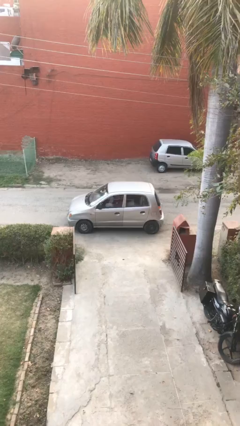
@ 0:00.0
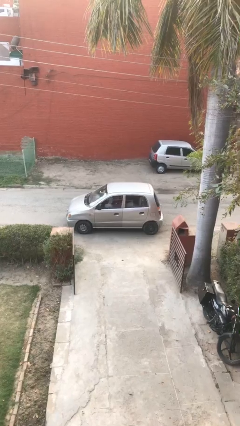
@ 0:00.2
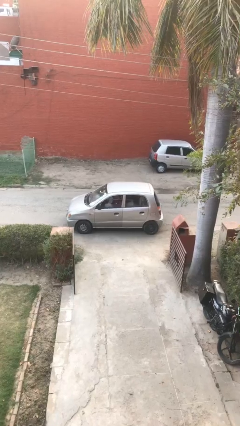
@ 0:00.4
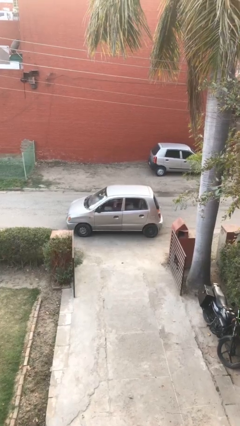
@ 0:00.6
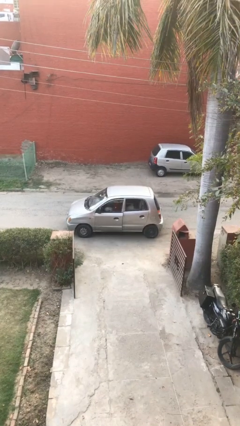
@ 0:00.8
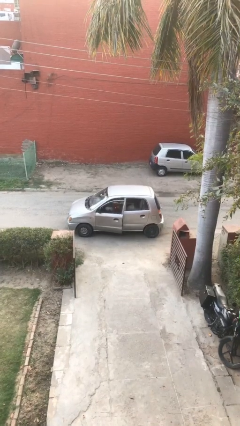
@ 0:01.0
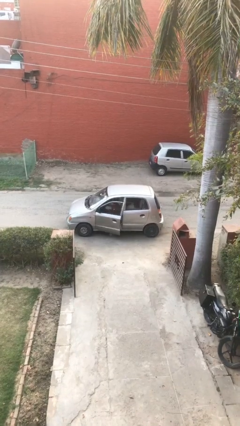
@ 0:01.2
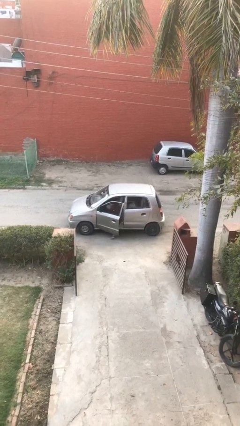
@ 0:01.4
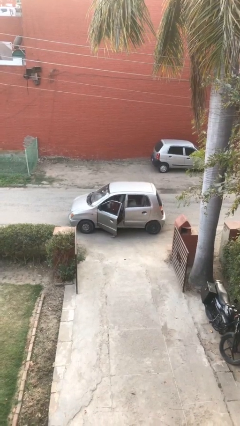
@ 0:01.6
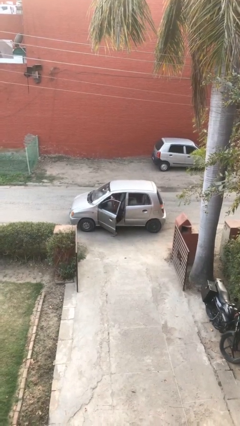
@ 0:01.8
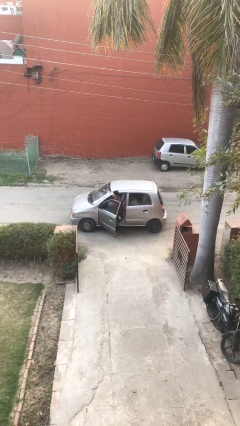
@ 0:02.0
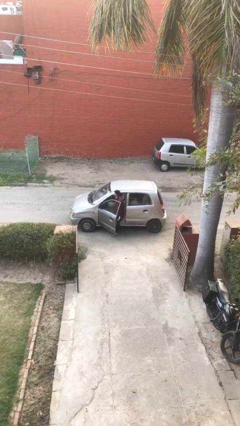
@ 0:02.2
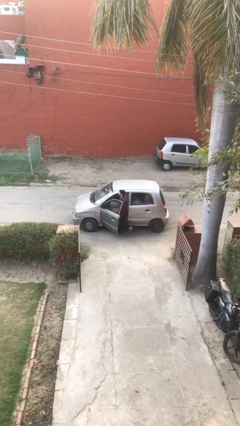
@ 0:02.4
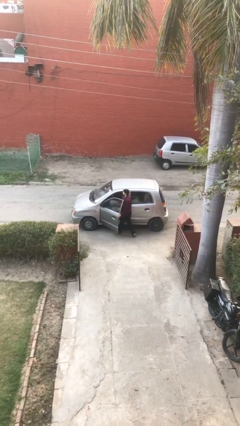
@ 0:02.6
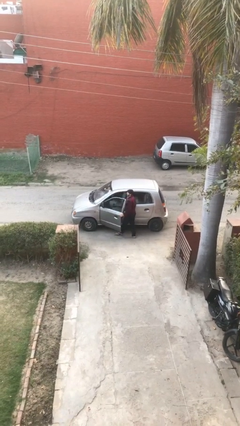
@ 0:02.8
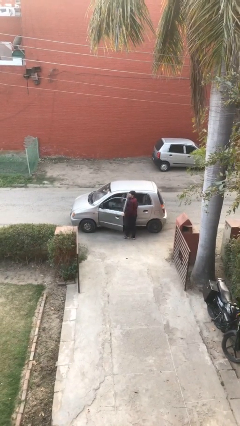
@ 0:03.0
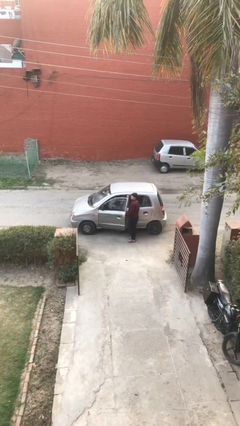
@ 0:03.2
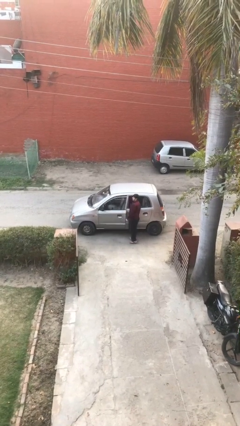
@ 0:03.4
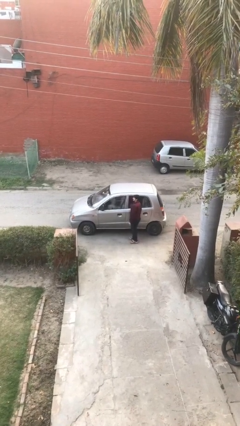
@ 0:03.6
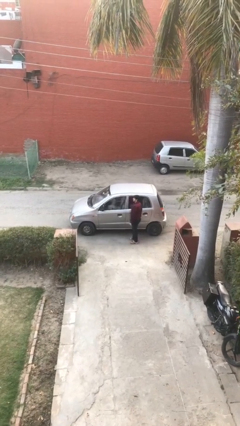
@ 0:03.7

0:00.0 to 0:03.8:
car drops off person

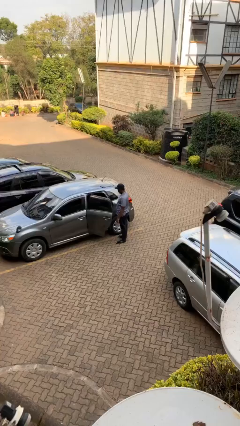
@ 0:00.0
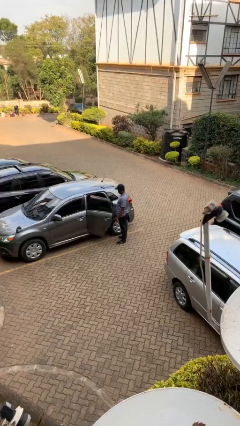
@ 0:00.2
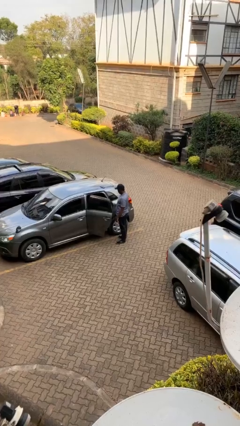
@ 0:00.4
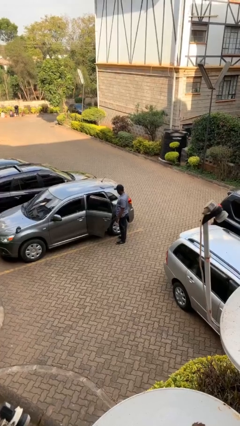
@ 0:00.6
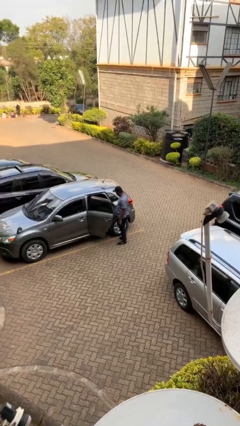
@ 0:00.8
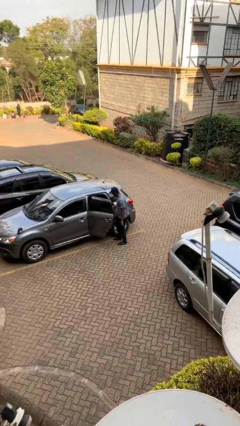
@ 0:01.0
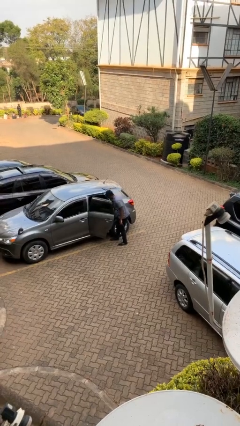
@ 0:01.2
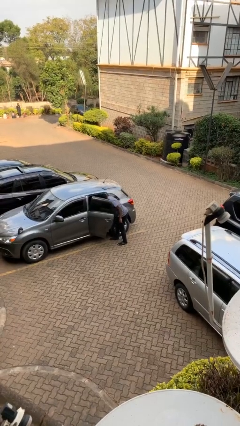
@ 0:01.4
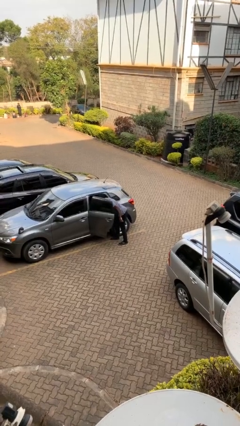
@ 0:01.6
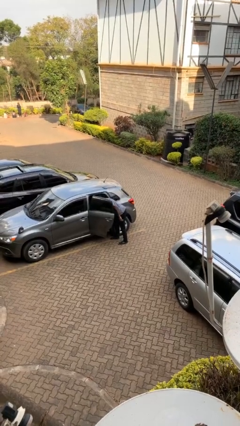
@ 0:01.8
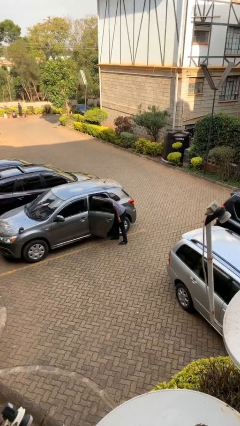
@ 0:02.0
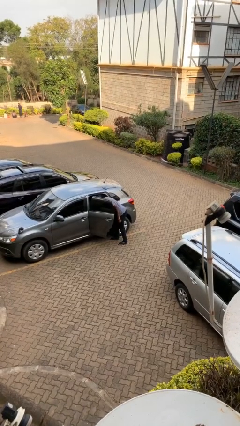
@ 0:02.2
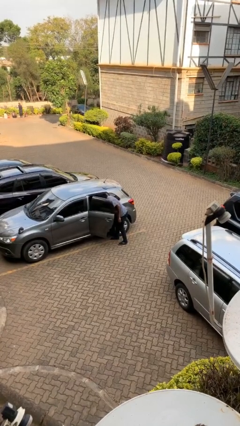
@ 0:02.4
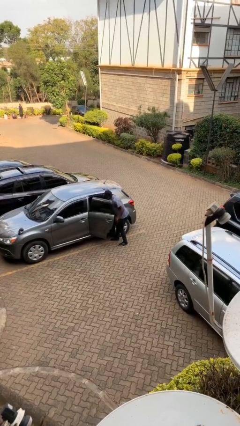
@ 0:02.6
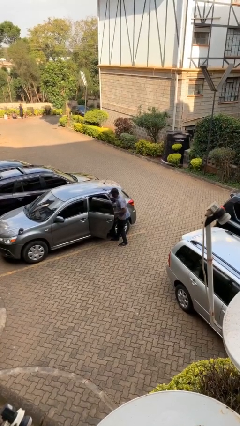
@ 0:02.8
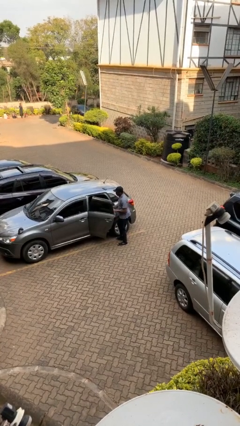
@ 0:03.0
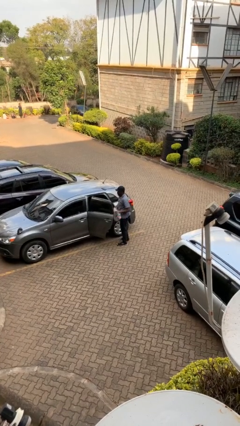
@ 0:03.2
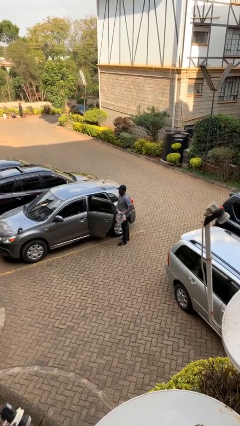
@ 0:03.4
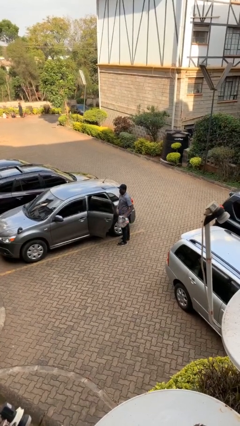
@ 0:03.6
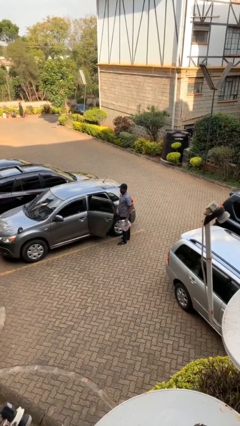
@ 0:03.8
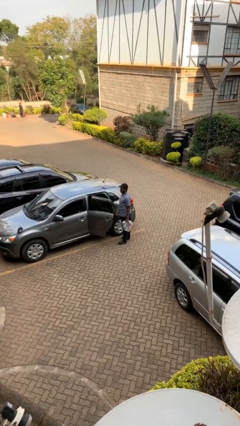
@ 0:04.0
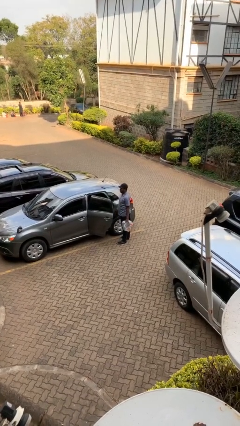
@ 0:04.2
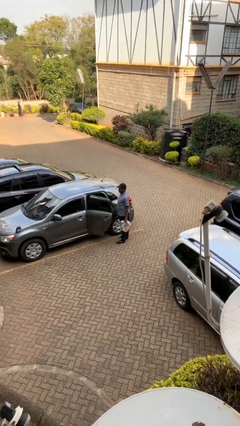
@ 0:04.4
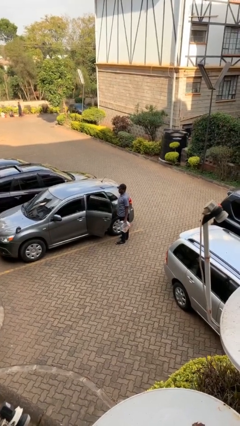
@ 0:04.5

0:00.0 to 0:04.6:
person unloads car

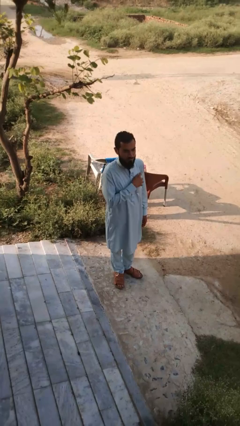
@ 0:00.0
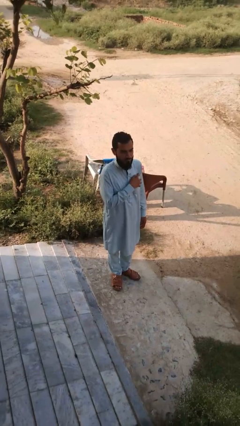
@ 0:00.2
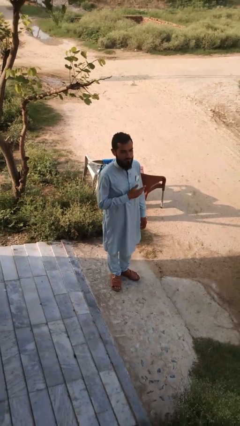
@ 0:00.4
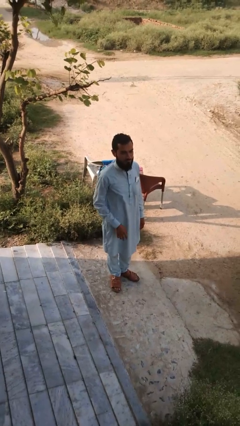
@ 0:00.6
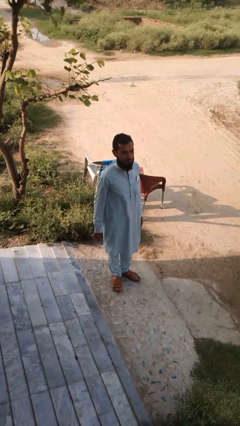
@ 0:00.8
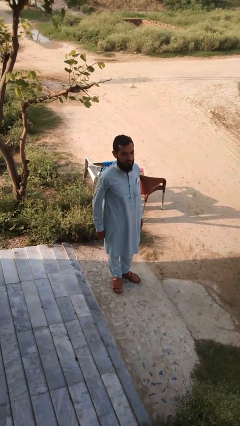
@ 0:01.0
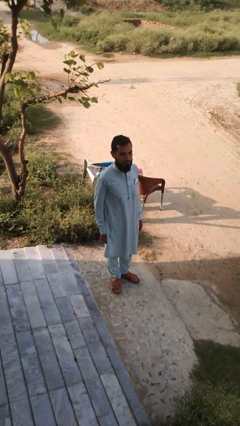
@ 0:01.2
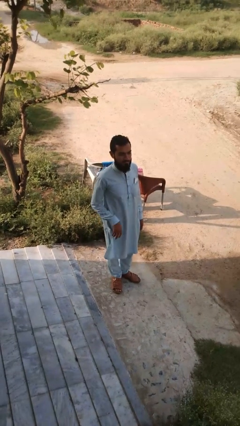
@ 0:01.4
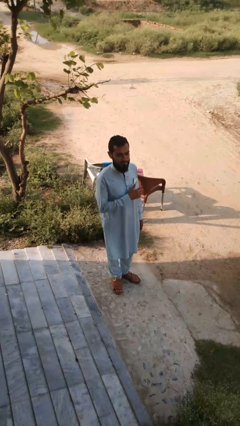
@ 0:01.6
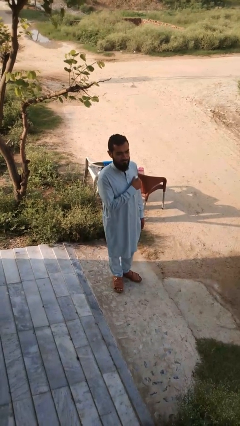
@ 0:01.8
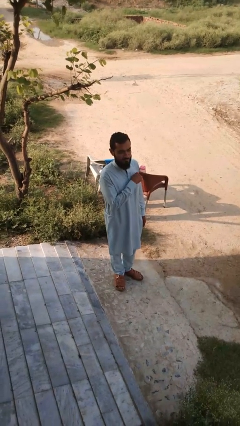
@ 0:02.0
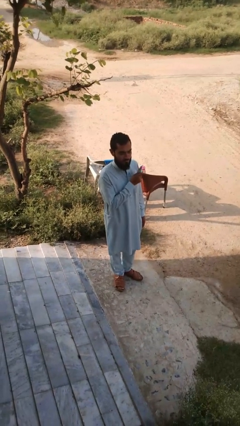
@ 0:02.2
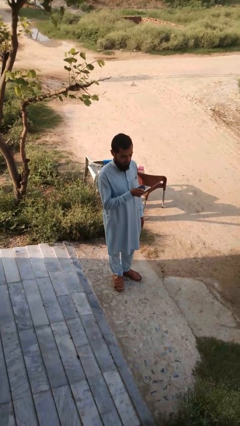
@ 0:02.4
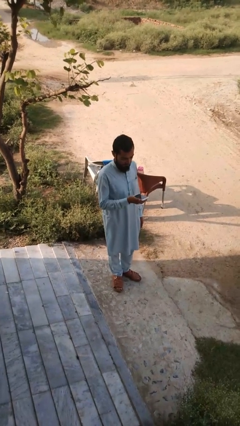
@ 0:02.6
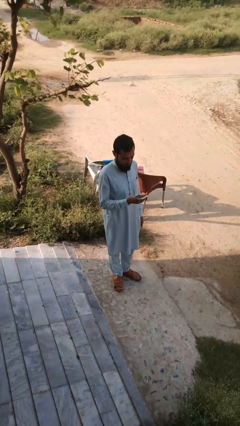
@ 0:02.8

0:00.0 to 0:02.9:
person takes phone from pocket

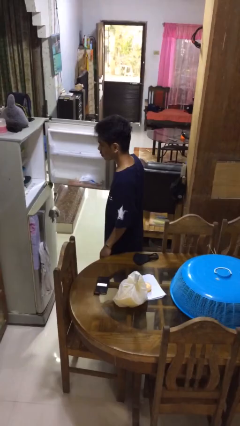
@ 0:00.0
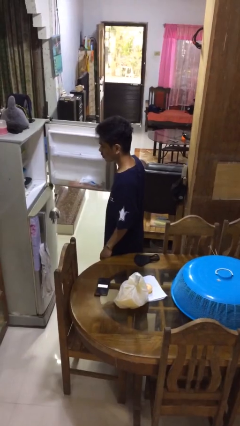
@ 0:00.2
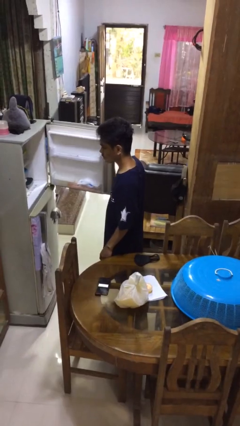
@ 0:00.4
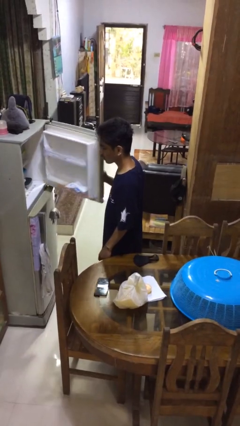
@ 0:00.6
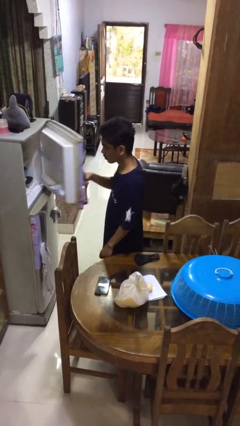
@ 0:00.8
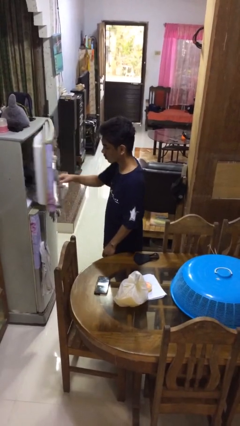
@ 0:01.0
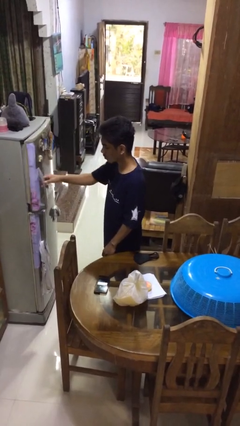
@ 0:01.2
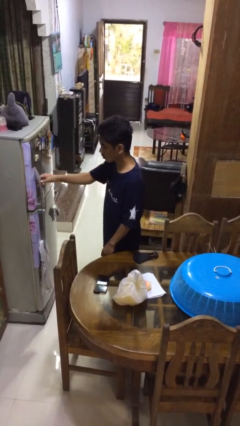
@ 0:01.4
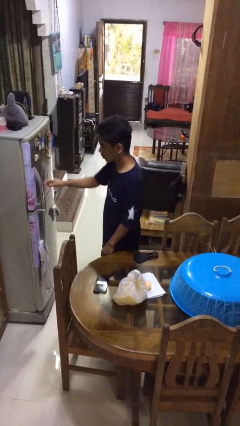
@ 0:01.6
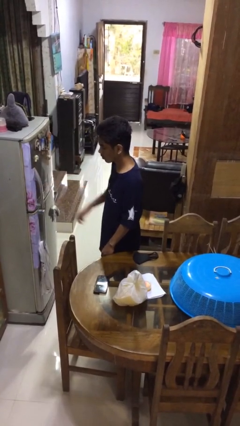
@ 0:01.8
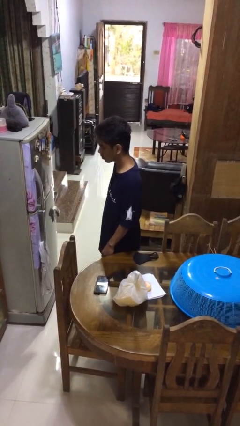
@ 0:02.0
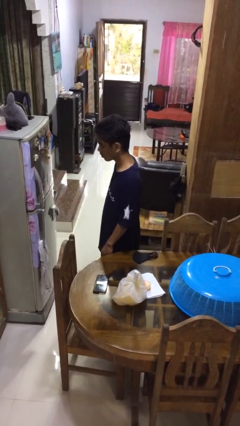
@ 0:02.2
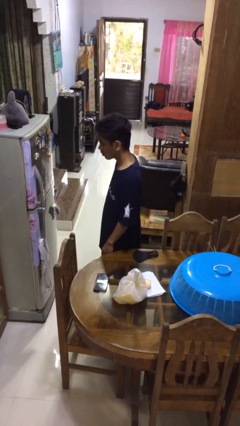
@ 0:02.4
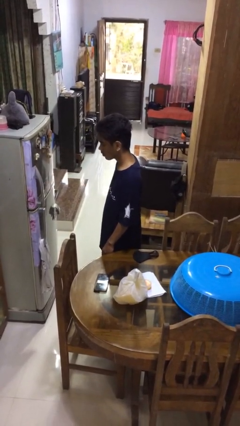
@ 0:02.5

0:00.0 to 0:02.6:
person closes refrigerator

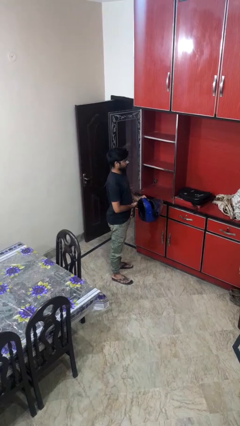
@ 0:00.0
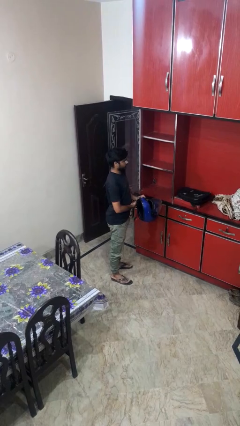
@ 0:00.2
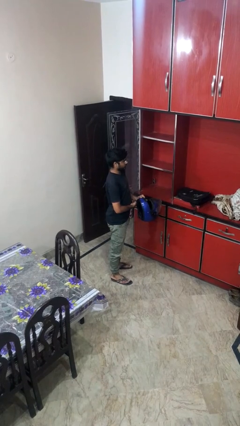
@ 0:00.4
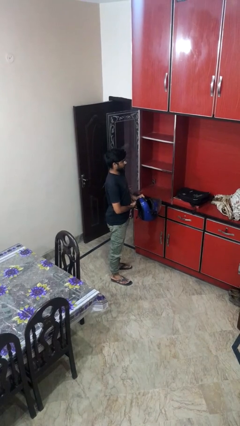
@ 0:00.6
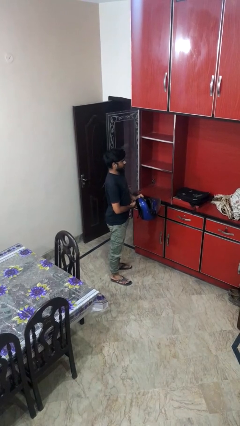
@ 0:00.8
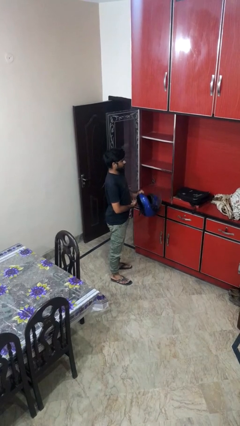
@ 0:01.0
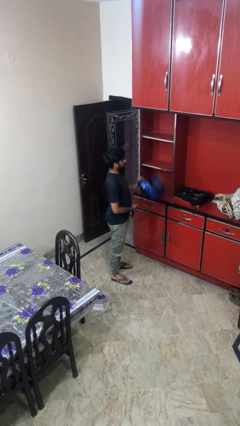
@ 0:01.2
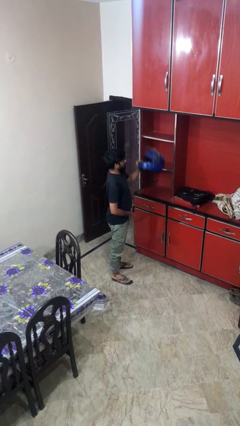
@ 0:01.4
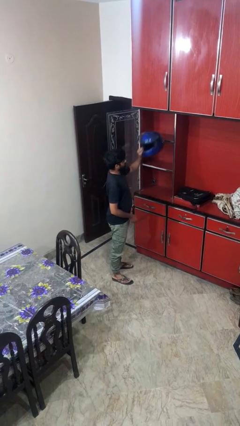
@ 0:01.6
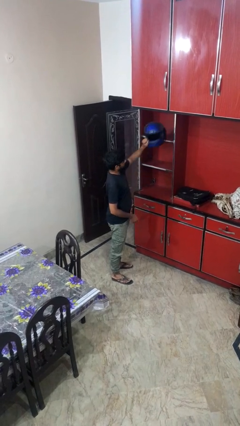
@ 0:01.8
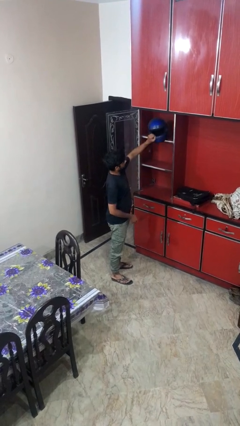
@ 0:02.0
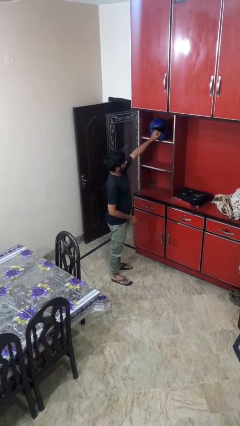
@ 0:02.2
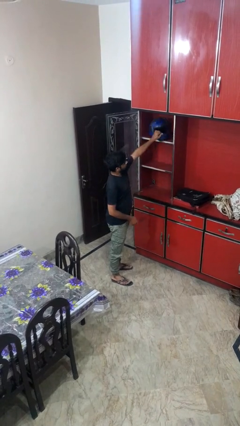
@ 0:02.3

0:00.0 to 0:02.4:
person puts down object on shelf

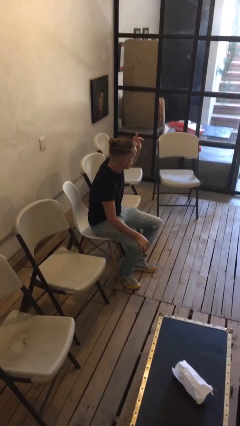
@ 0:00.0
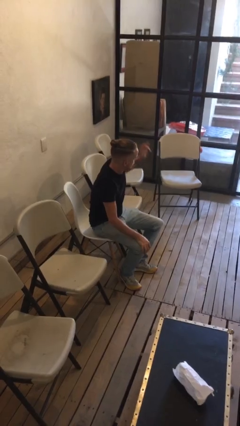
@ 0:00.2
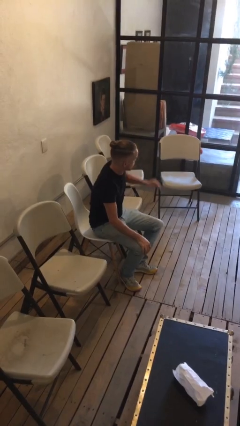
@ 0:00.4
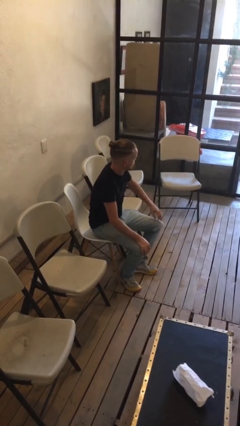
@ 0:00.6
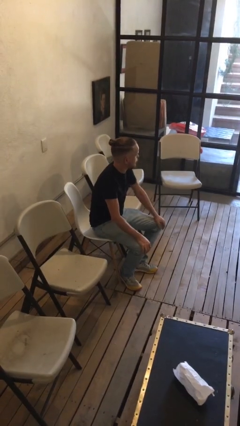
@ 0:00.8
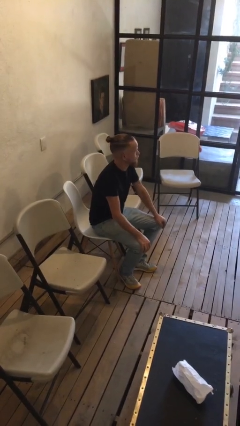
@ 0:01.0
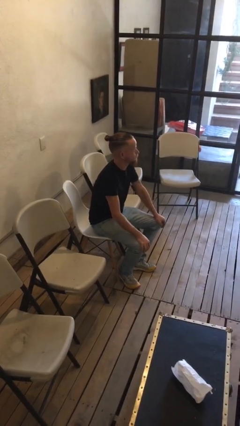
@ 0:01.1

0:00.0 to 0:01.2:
person gestures lower hand
